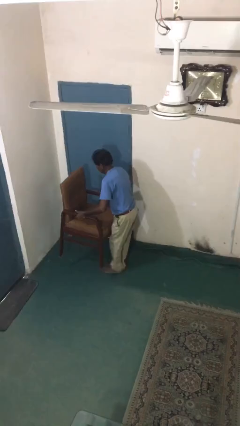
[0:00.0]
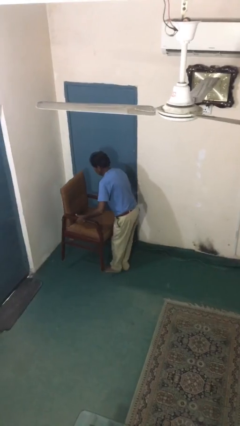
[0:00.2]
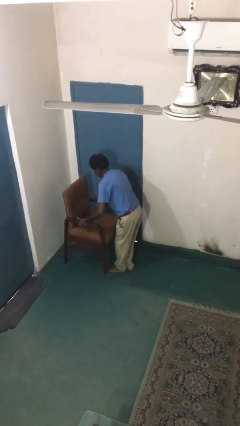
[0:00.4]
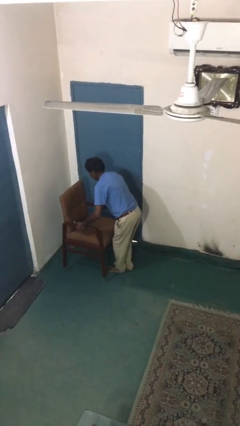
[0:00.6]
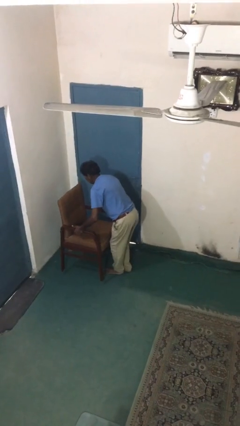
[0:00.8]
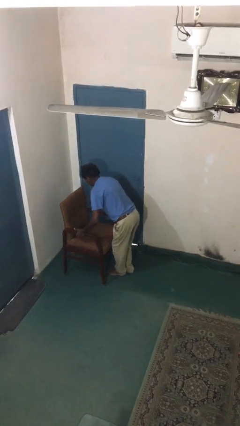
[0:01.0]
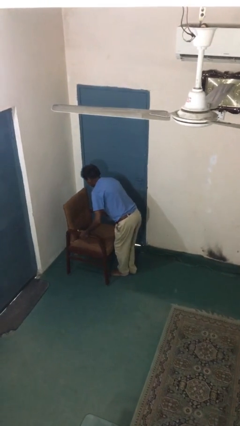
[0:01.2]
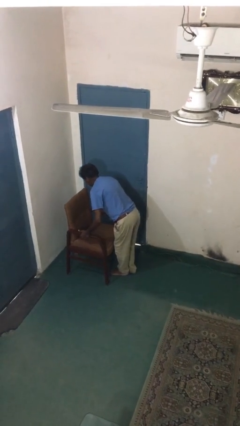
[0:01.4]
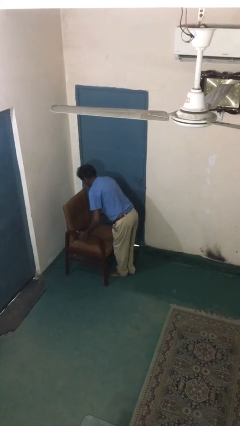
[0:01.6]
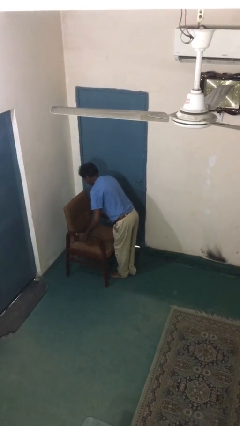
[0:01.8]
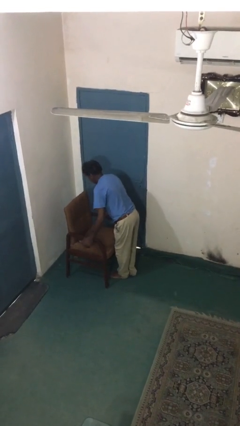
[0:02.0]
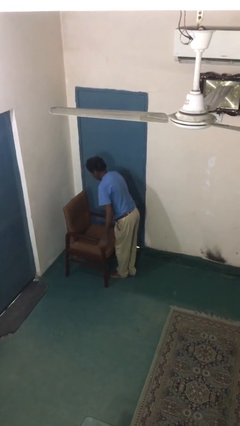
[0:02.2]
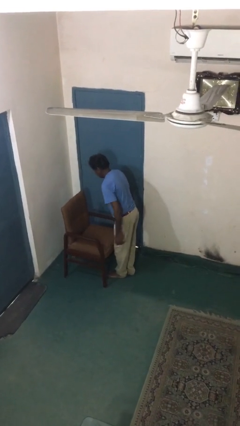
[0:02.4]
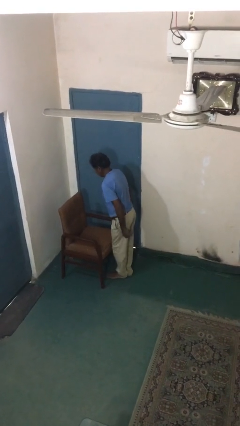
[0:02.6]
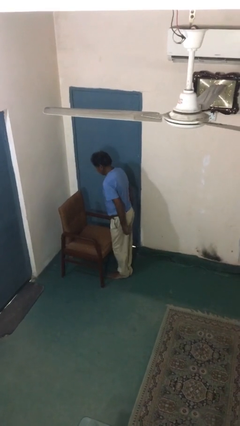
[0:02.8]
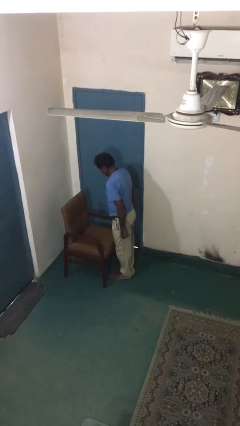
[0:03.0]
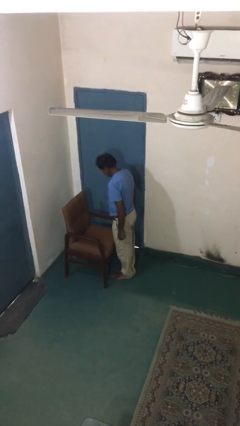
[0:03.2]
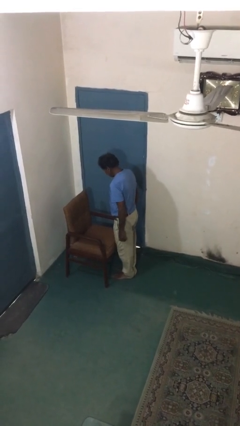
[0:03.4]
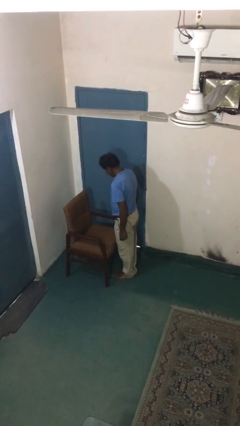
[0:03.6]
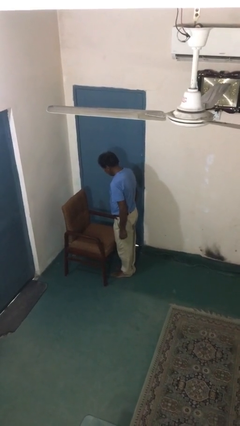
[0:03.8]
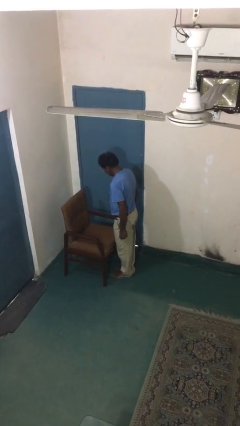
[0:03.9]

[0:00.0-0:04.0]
person puts down object on floor

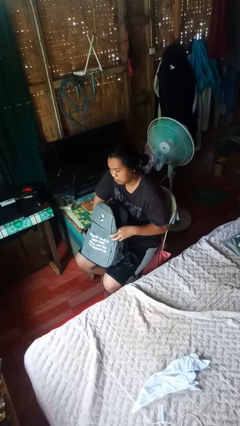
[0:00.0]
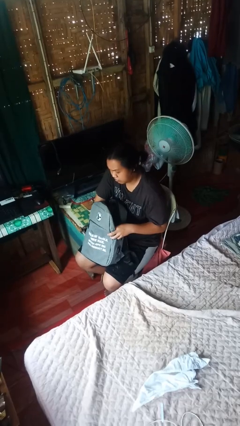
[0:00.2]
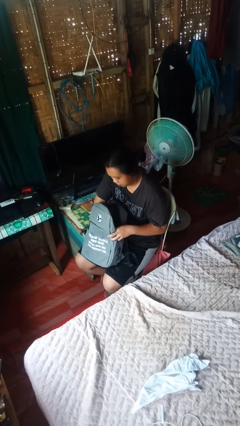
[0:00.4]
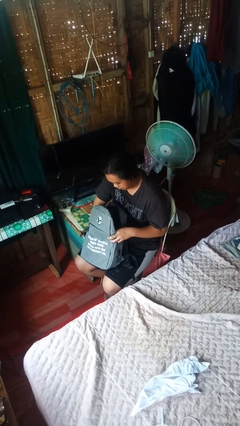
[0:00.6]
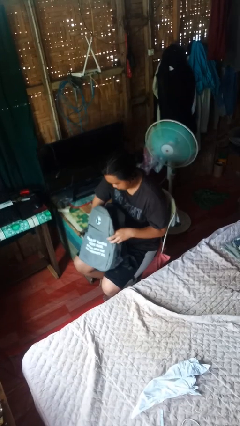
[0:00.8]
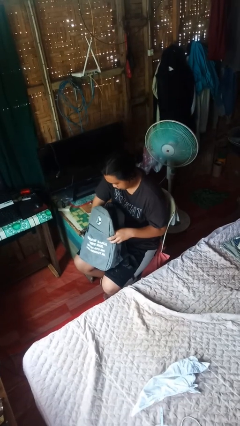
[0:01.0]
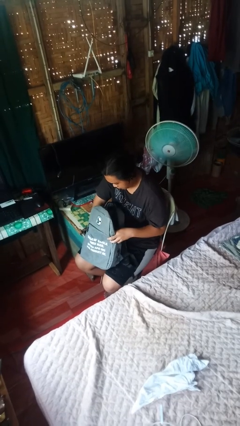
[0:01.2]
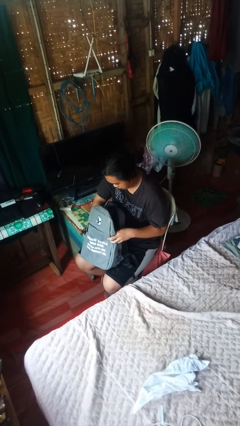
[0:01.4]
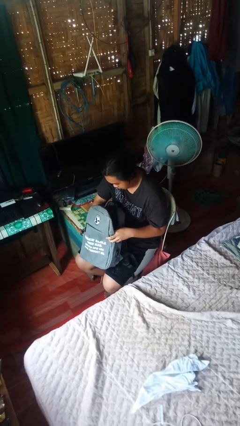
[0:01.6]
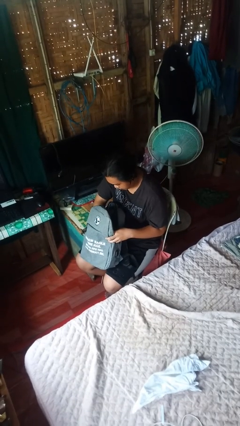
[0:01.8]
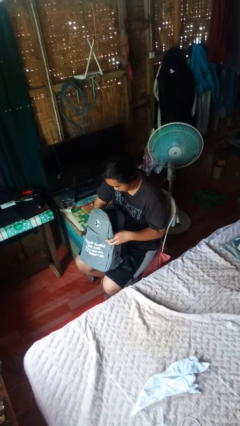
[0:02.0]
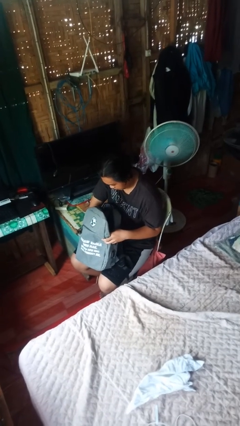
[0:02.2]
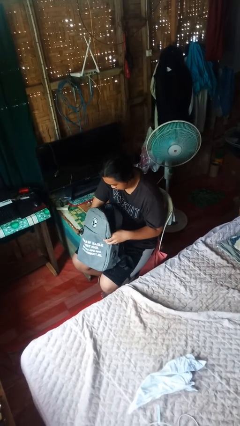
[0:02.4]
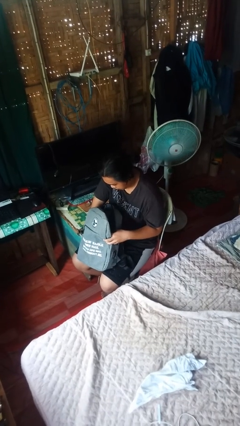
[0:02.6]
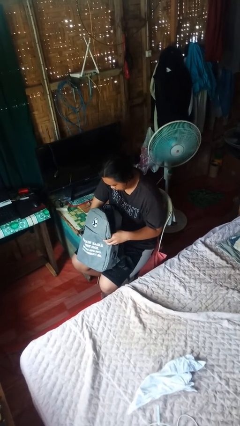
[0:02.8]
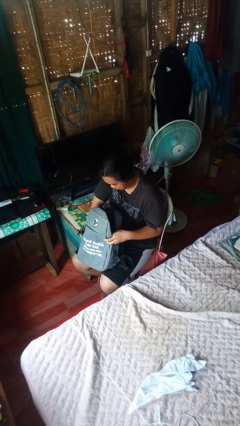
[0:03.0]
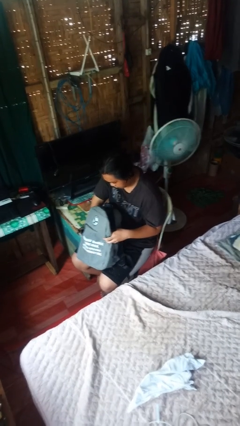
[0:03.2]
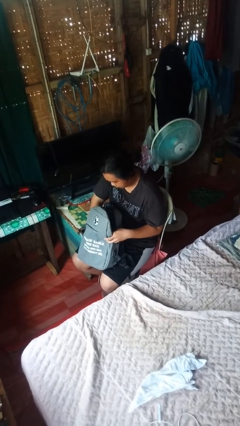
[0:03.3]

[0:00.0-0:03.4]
person searches in backpack

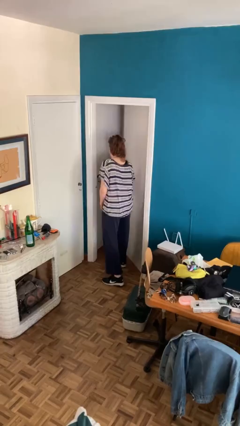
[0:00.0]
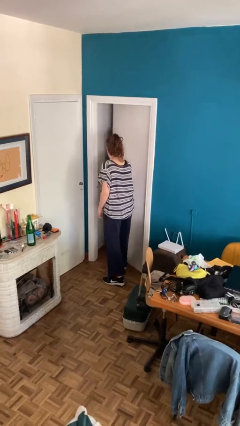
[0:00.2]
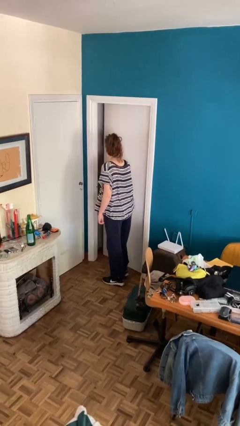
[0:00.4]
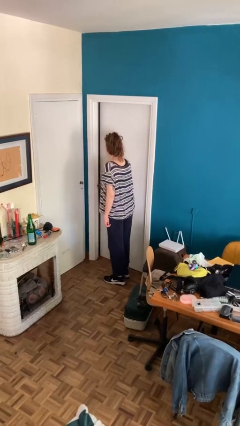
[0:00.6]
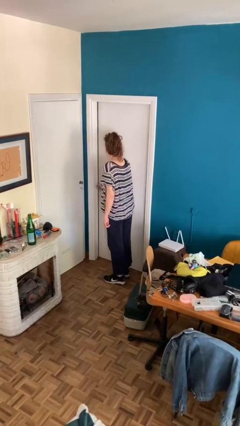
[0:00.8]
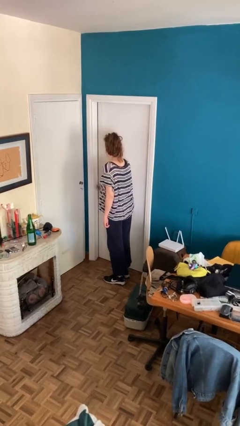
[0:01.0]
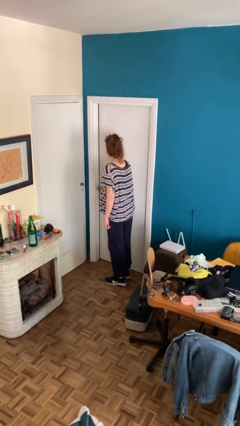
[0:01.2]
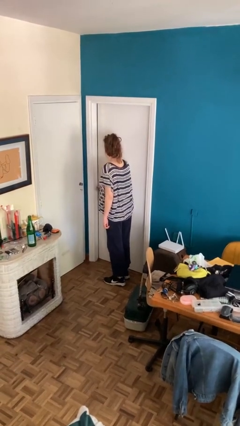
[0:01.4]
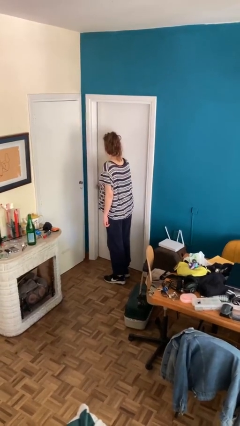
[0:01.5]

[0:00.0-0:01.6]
person closes facility door

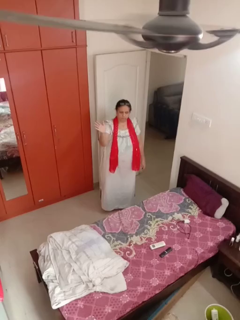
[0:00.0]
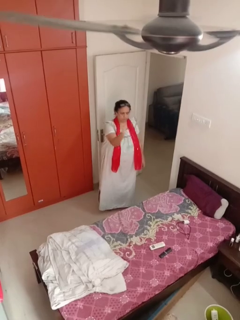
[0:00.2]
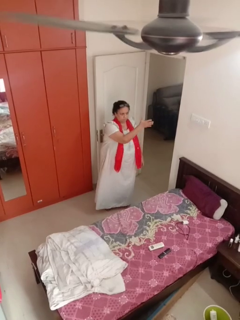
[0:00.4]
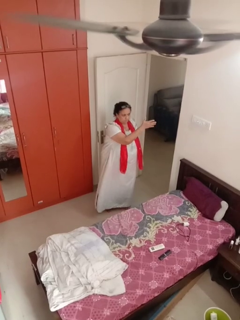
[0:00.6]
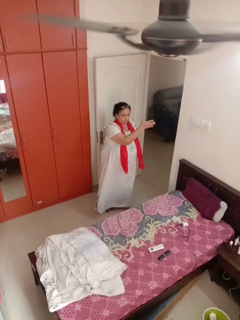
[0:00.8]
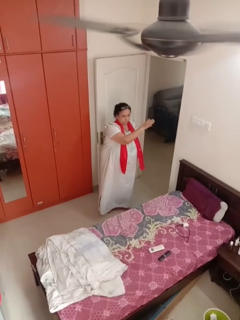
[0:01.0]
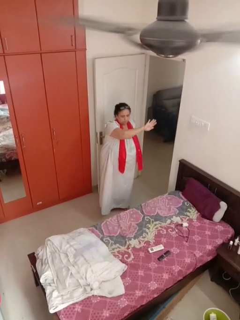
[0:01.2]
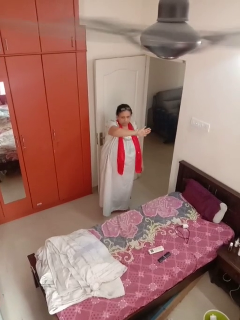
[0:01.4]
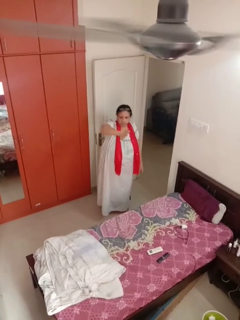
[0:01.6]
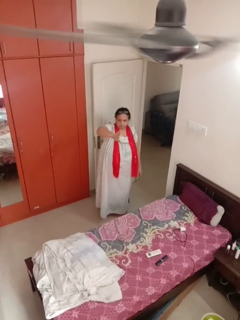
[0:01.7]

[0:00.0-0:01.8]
person gestures swipe left

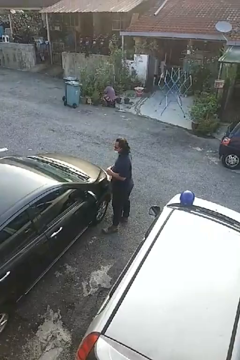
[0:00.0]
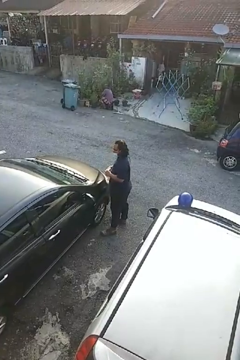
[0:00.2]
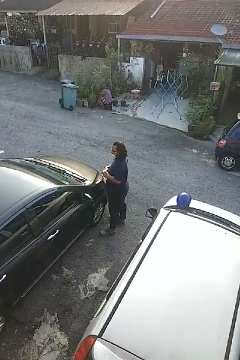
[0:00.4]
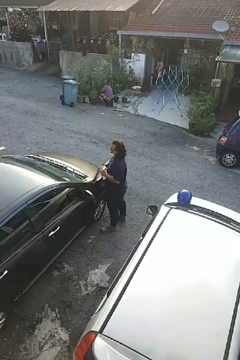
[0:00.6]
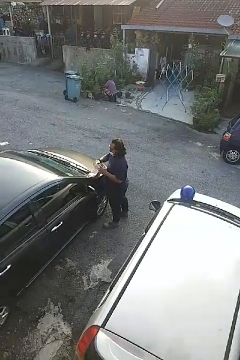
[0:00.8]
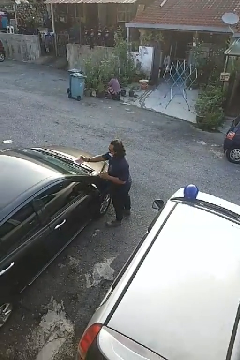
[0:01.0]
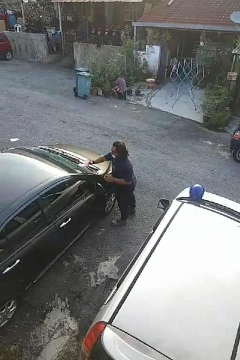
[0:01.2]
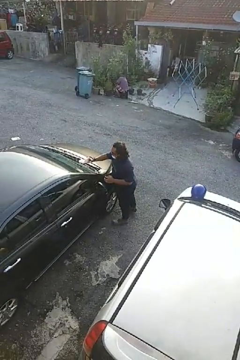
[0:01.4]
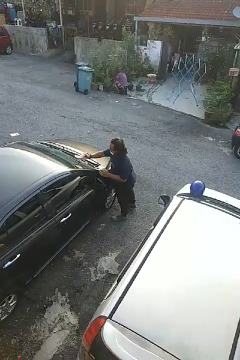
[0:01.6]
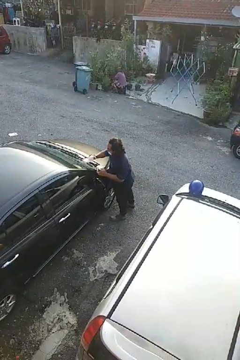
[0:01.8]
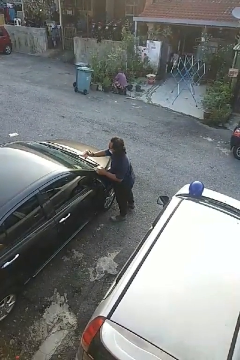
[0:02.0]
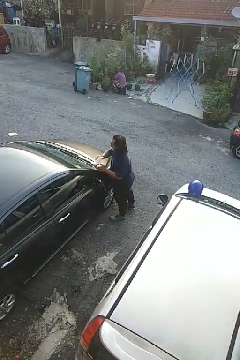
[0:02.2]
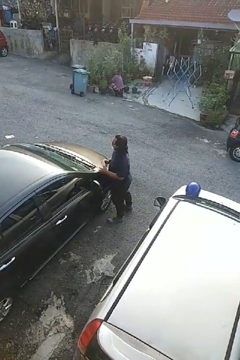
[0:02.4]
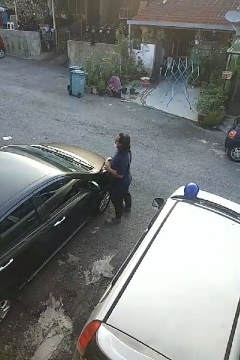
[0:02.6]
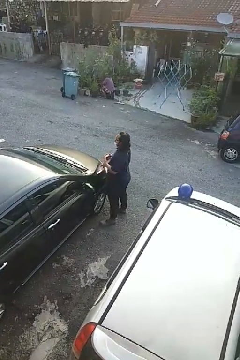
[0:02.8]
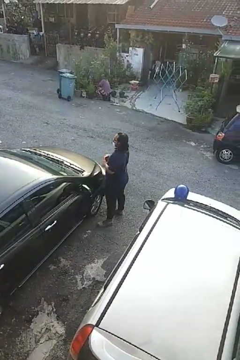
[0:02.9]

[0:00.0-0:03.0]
person polishes car with rag

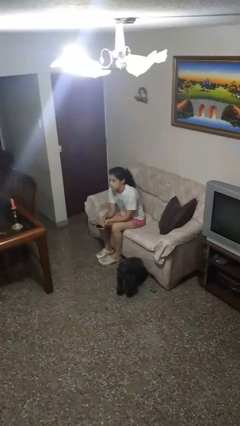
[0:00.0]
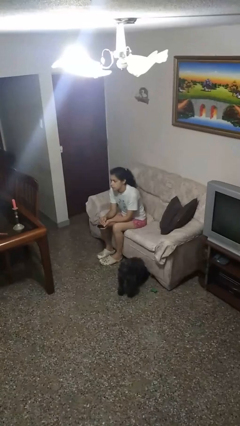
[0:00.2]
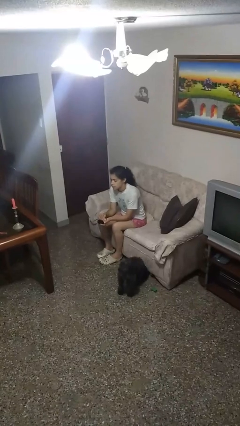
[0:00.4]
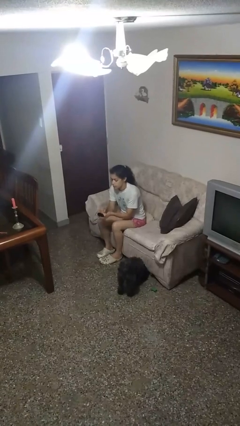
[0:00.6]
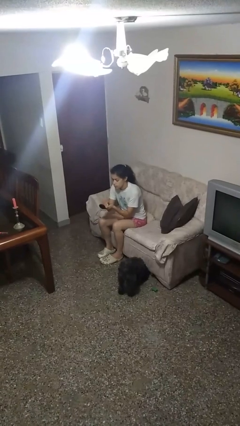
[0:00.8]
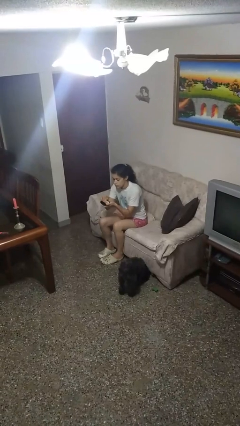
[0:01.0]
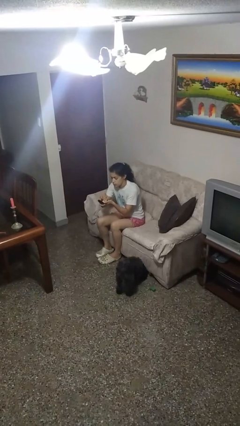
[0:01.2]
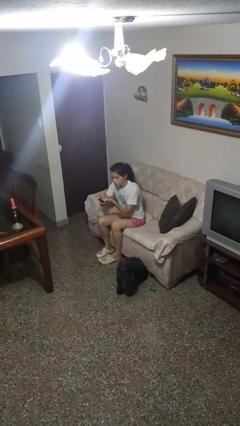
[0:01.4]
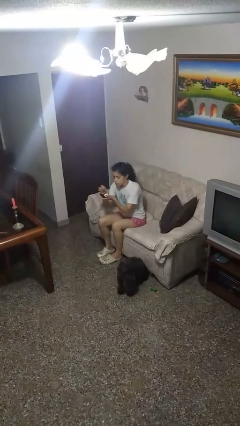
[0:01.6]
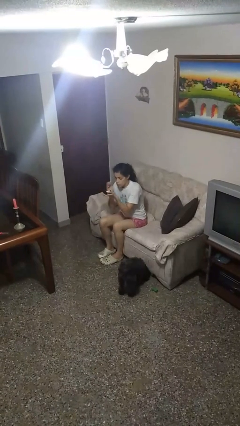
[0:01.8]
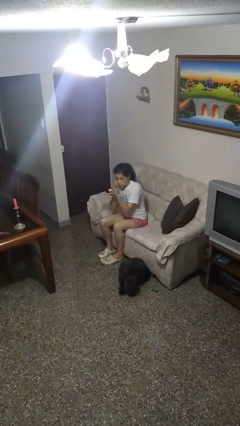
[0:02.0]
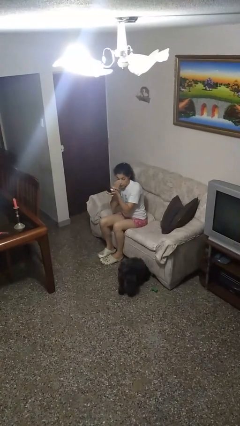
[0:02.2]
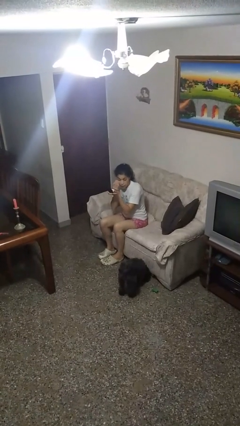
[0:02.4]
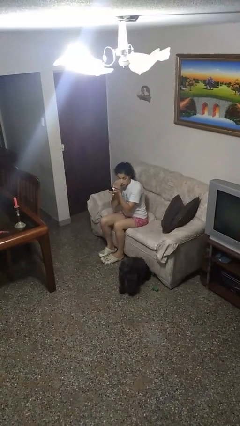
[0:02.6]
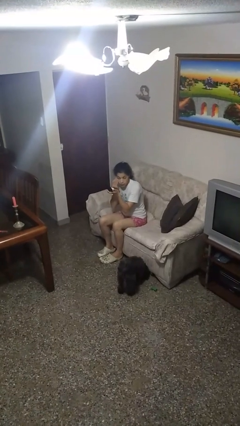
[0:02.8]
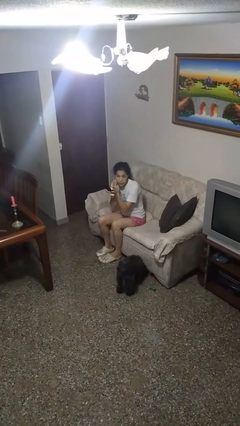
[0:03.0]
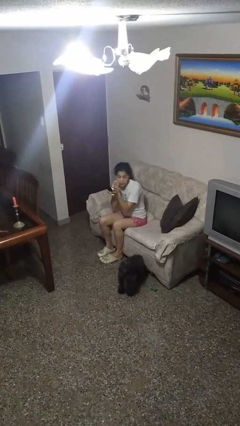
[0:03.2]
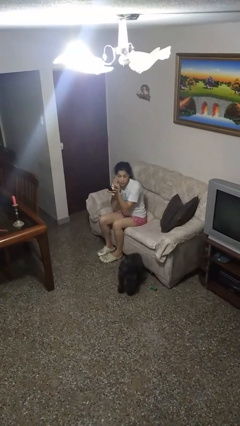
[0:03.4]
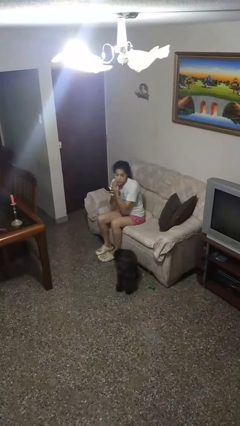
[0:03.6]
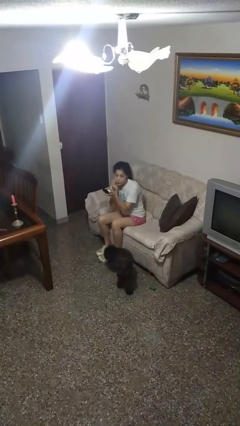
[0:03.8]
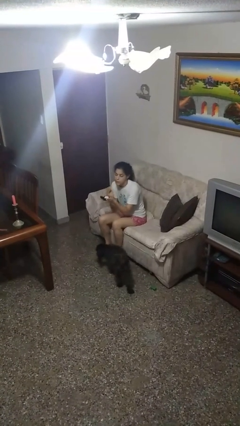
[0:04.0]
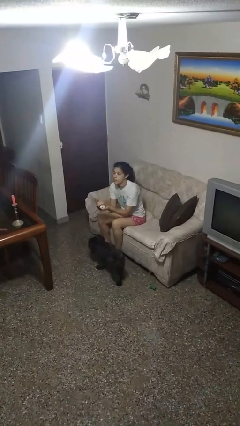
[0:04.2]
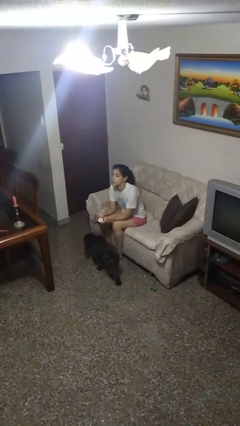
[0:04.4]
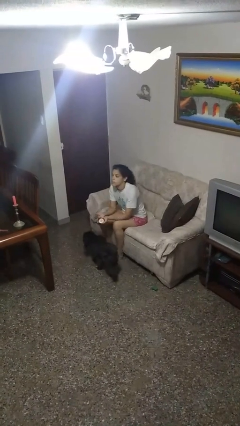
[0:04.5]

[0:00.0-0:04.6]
person applies foundation makeup
